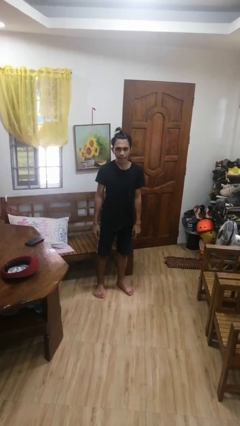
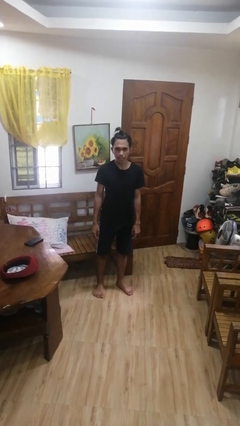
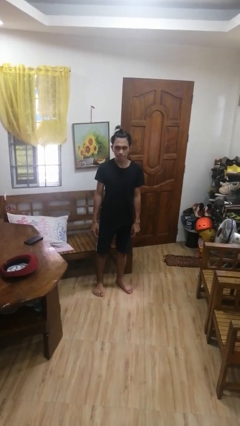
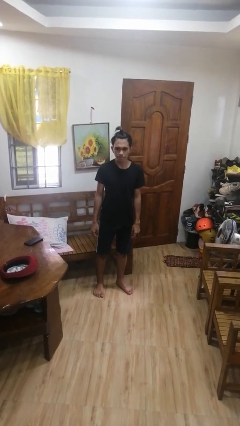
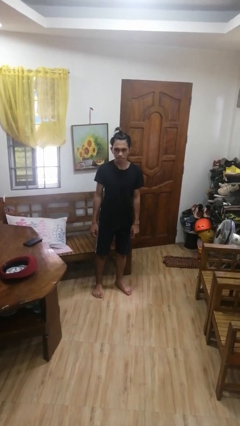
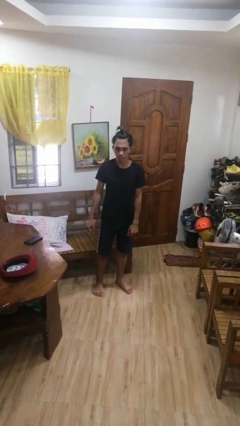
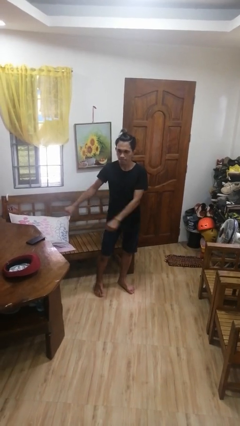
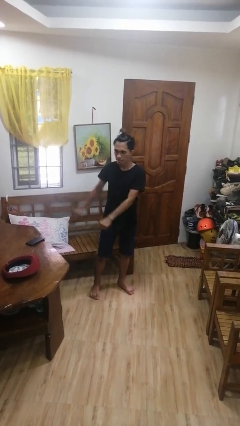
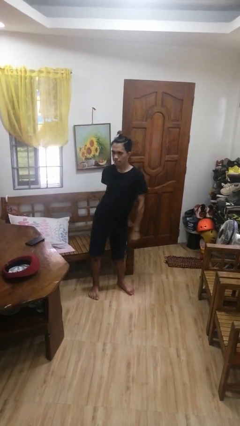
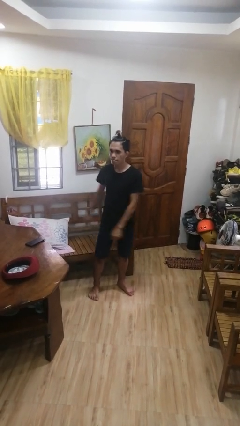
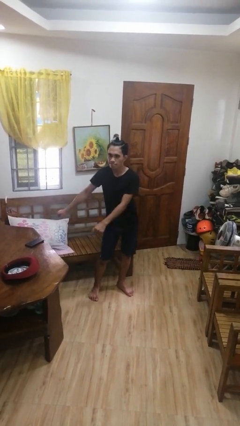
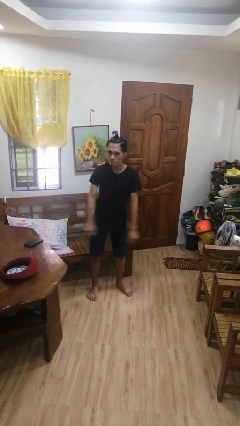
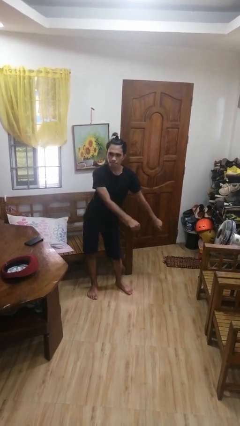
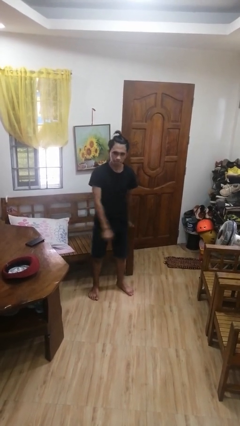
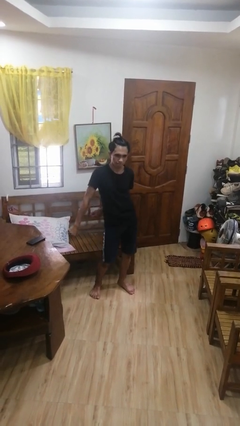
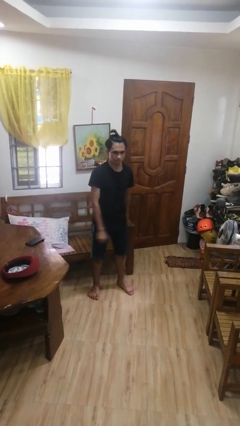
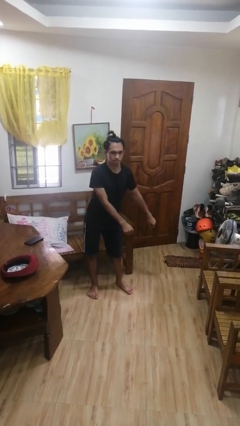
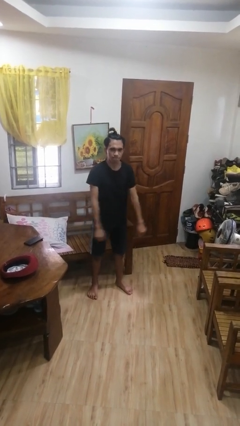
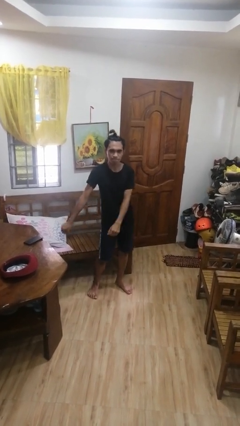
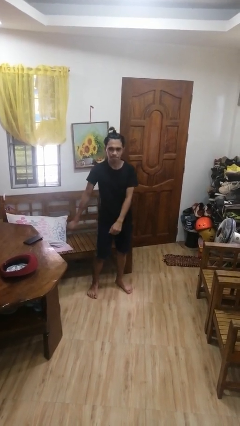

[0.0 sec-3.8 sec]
person dances in place

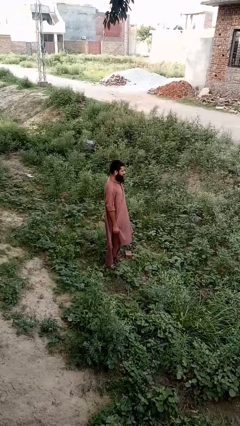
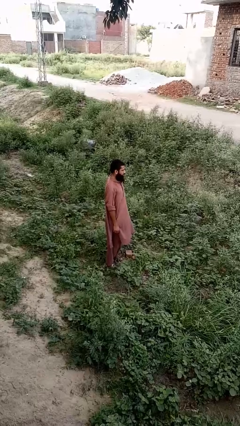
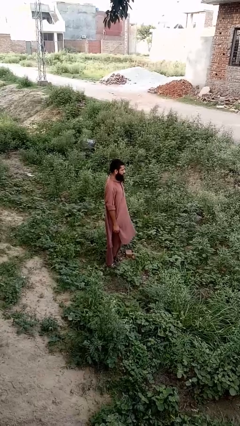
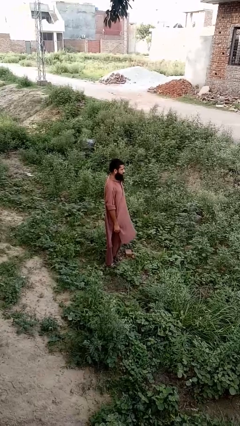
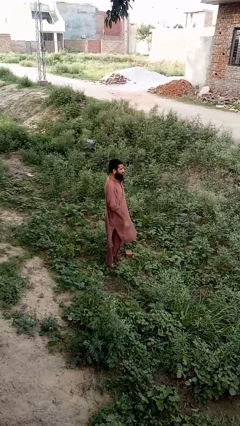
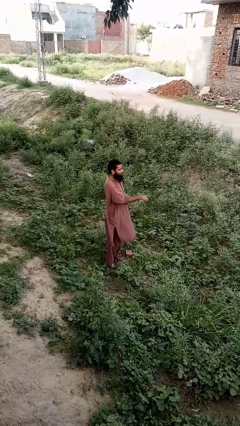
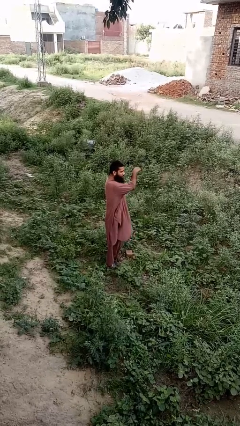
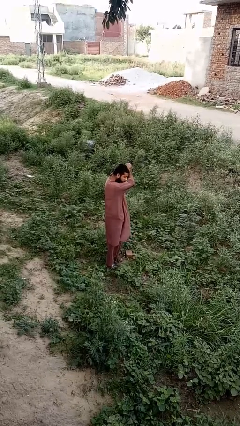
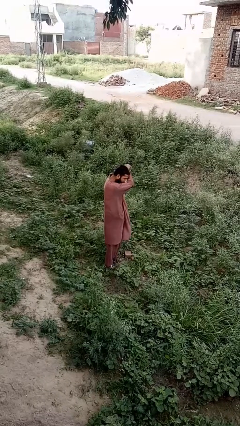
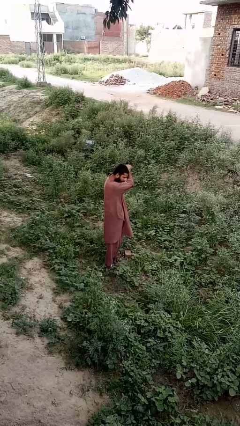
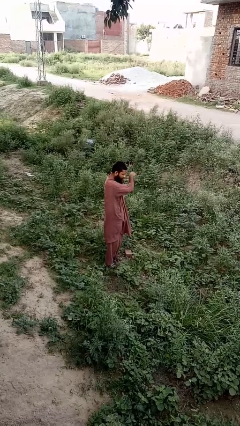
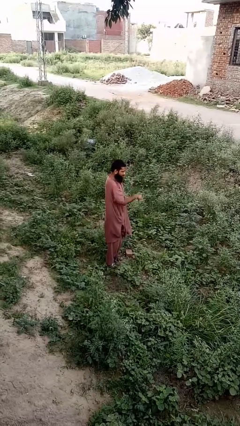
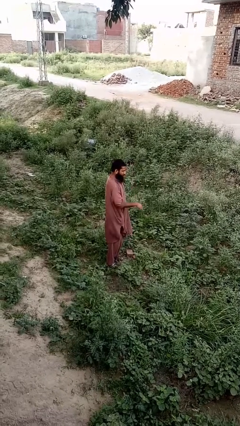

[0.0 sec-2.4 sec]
person sneezes into arm

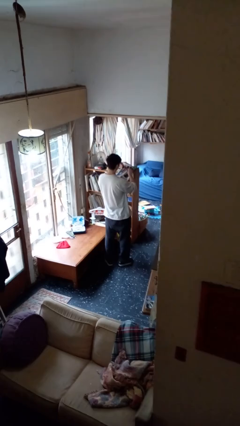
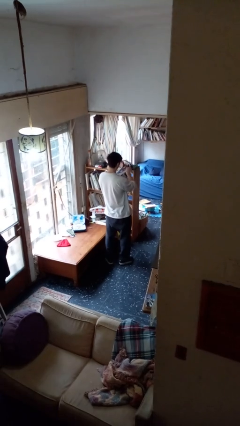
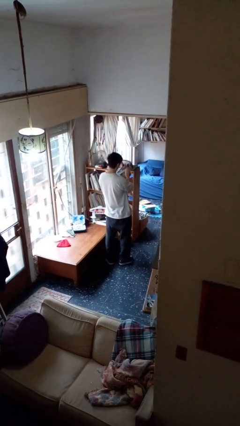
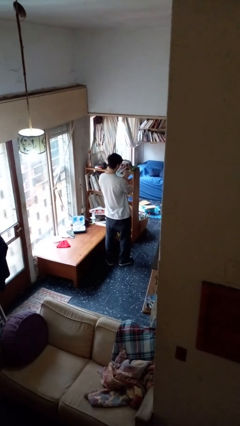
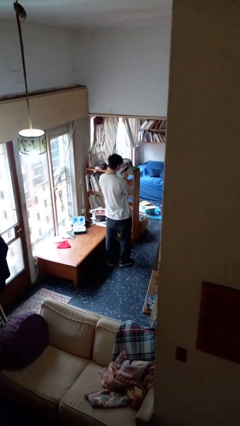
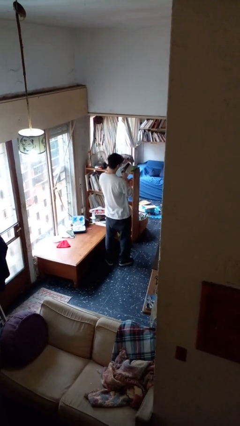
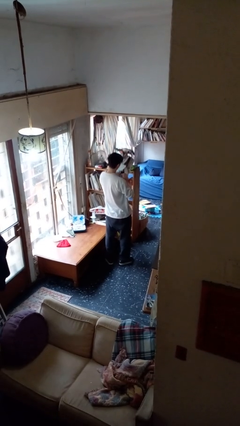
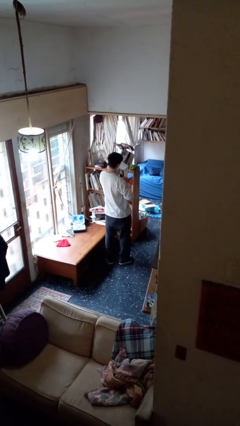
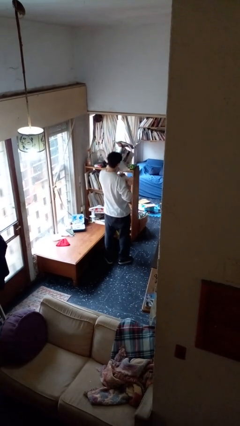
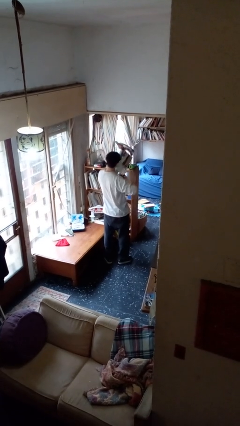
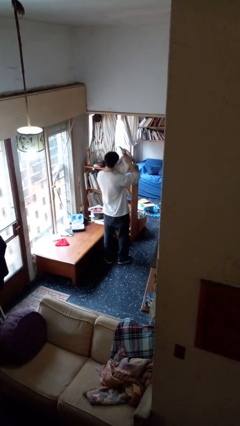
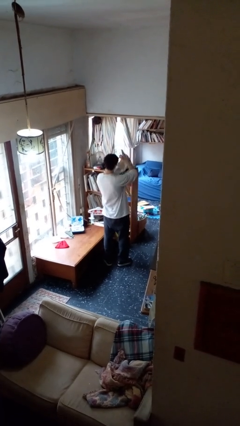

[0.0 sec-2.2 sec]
person tears paper

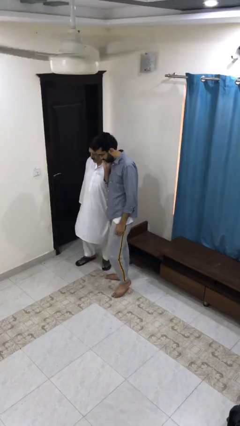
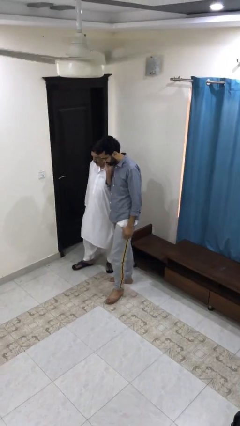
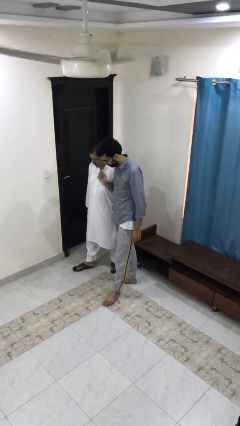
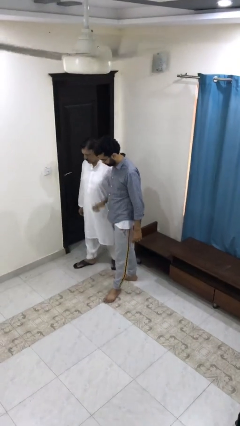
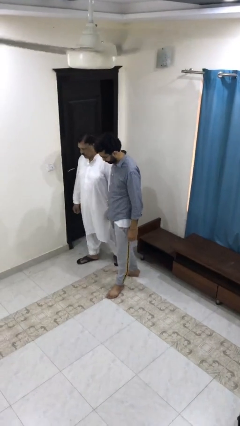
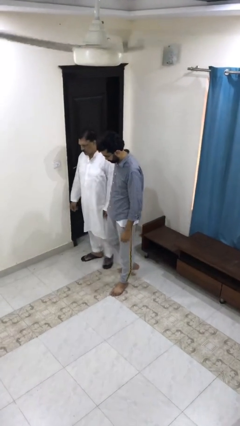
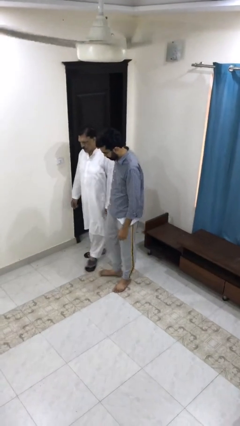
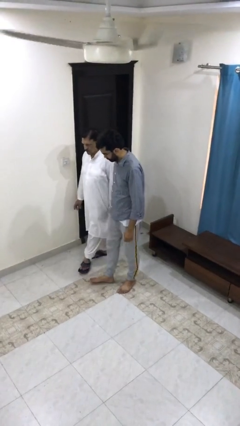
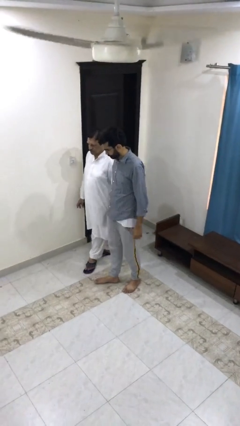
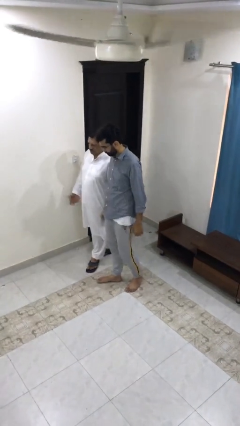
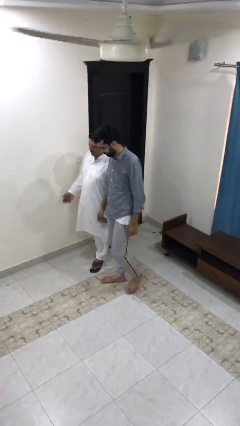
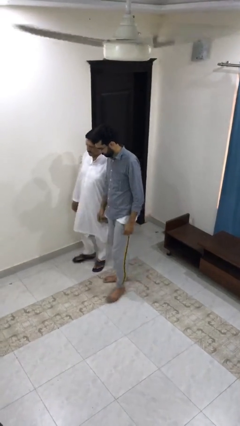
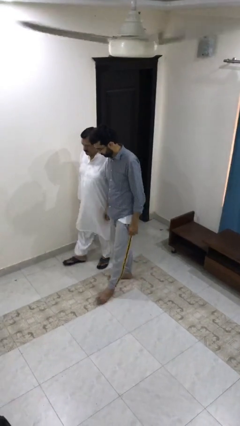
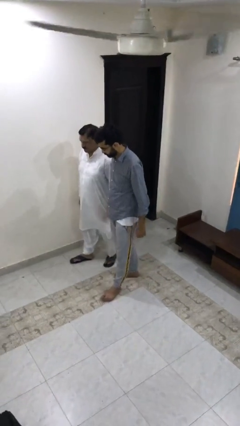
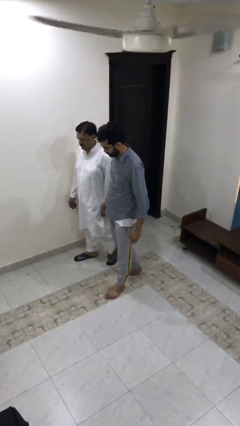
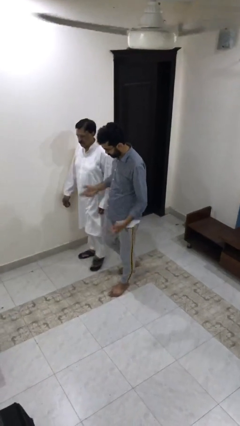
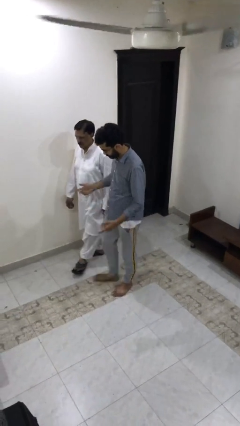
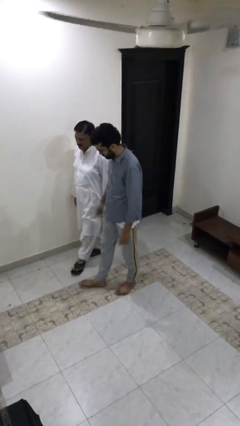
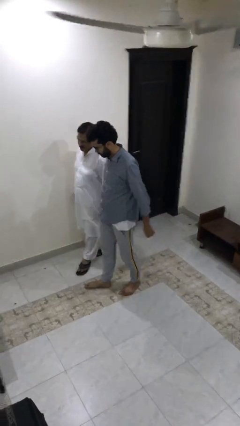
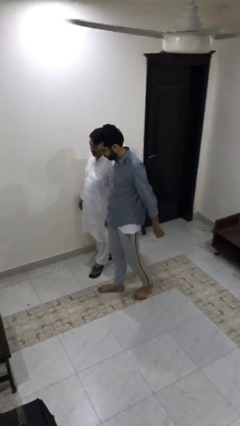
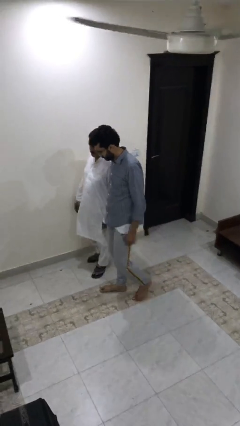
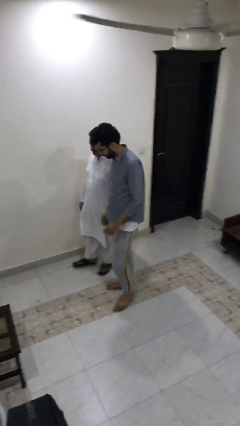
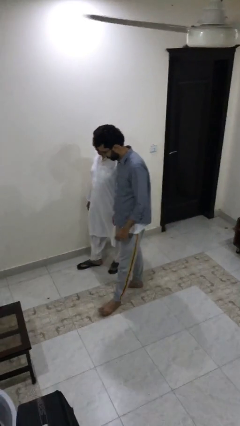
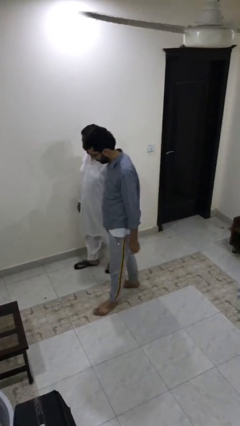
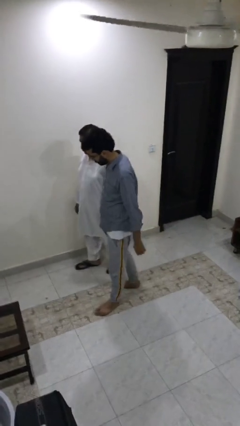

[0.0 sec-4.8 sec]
person talks to person

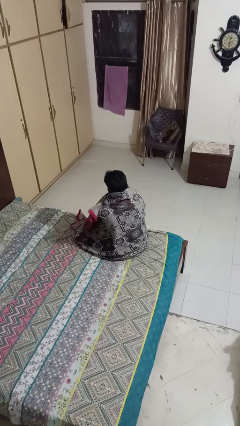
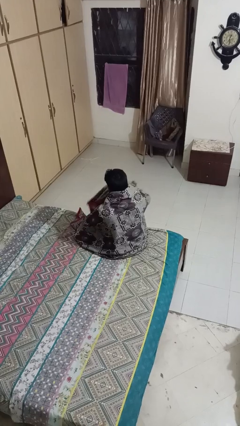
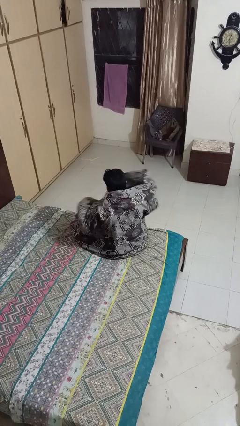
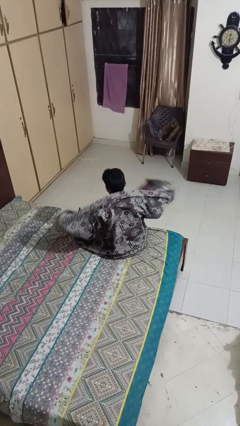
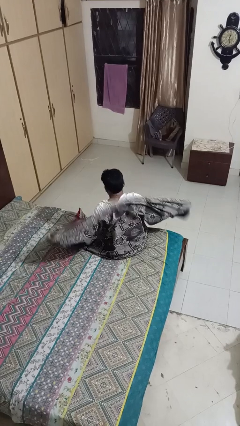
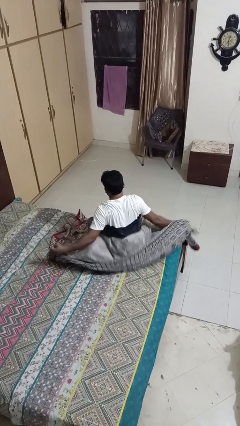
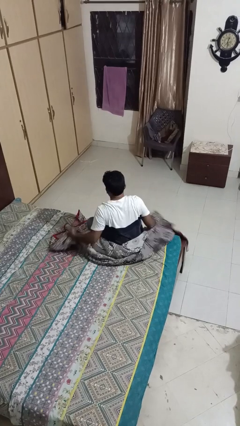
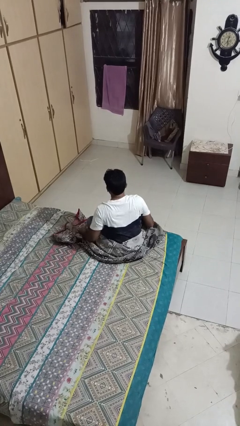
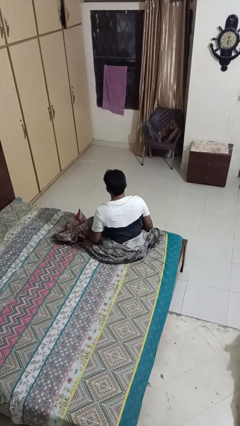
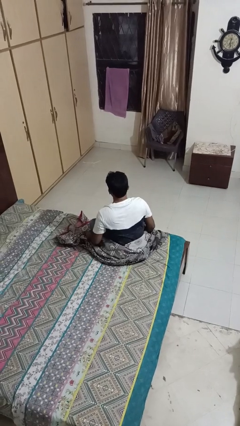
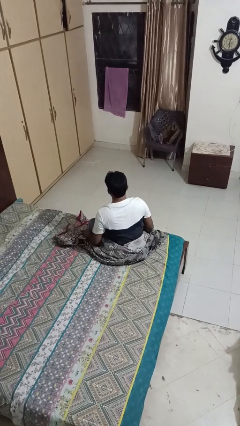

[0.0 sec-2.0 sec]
person uncovers with blanket

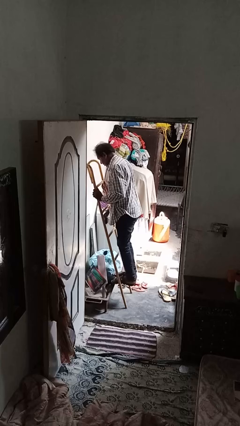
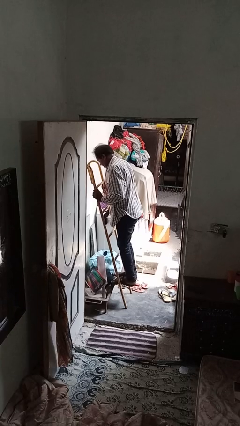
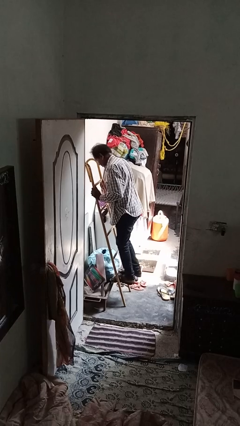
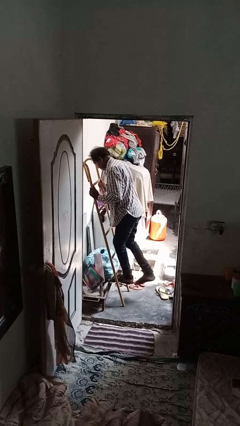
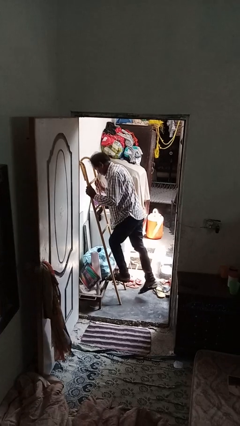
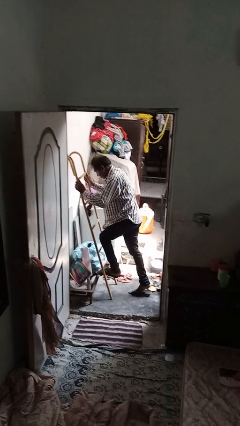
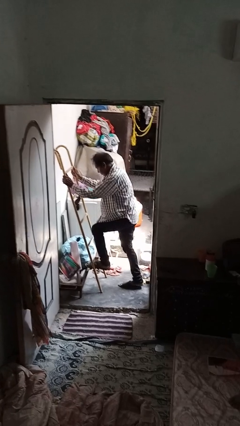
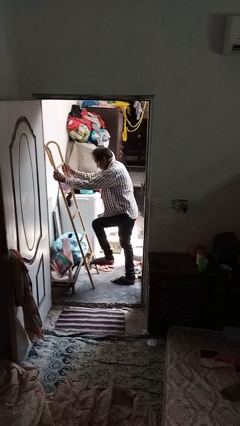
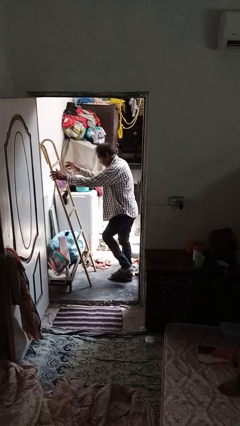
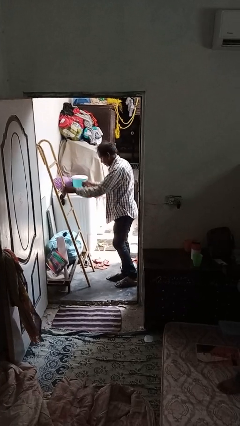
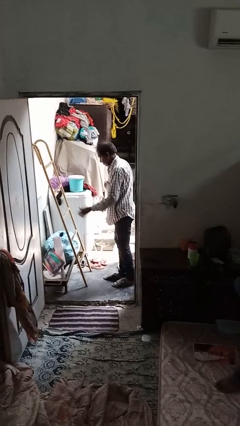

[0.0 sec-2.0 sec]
person climbs down ladder
